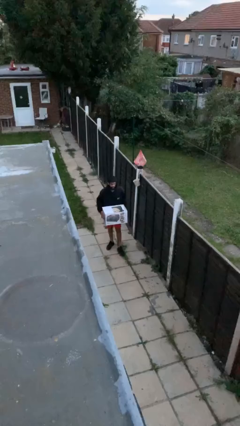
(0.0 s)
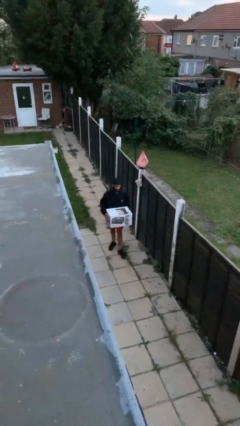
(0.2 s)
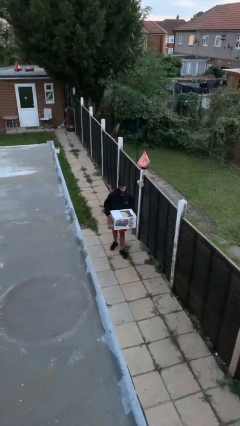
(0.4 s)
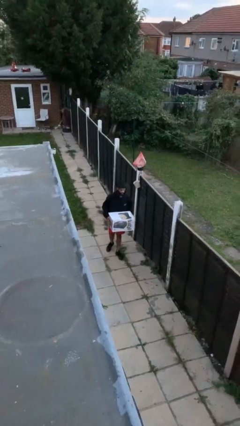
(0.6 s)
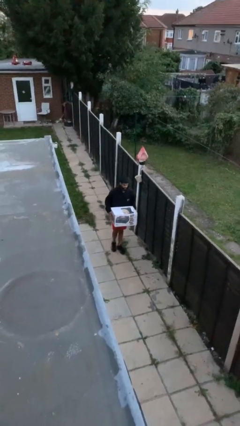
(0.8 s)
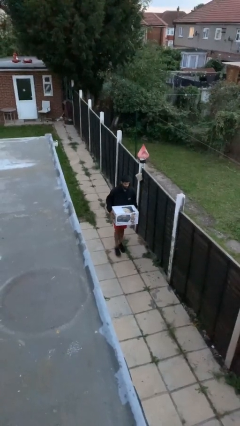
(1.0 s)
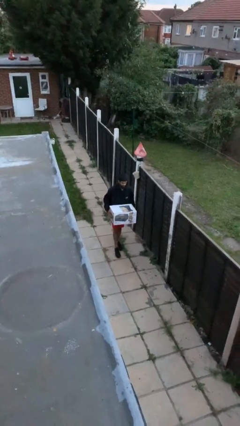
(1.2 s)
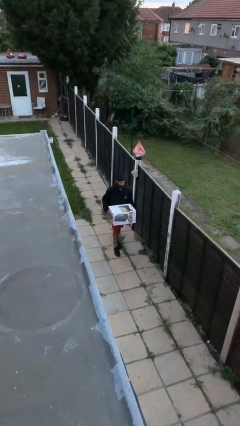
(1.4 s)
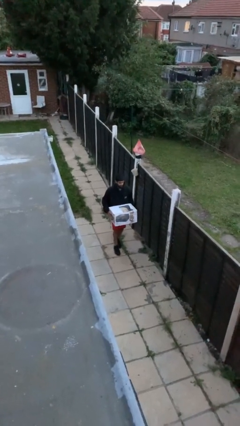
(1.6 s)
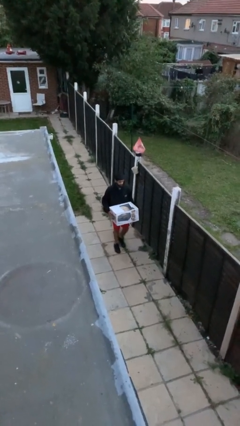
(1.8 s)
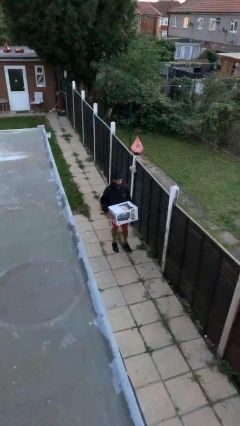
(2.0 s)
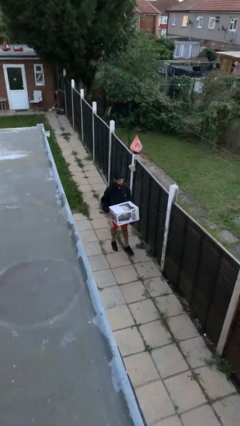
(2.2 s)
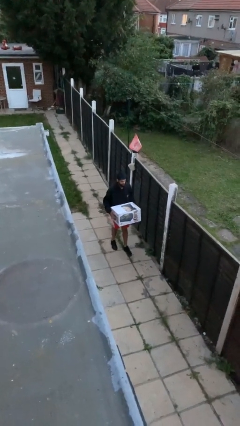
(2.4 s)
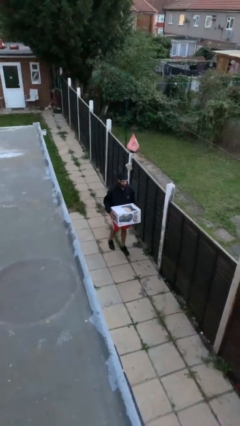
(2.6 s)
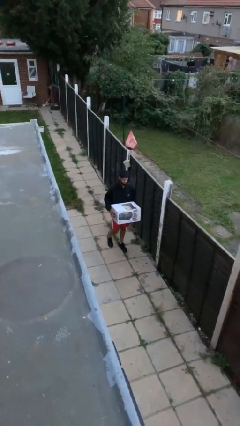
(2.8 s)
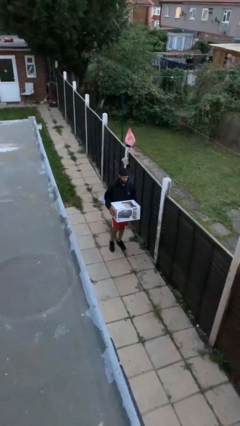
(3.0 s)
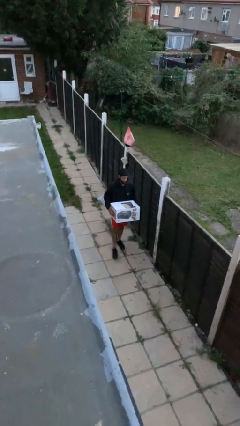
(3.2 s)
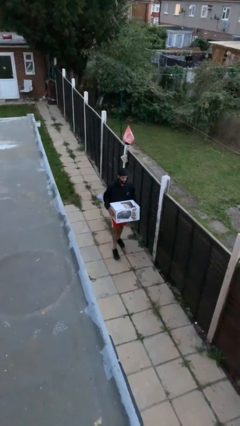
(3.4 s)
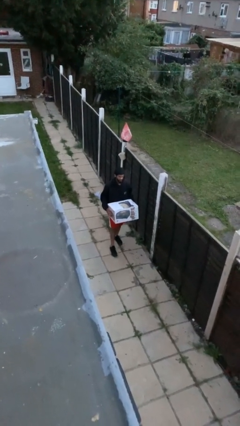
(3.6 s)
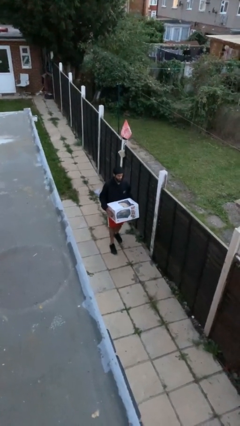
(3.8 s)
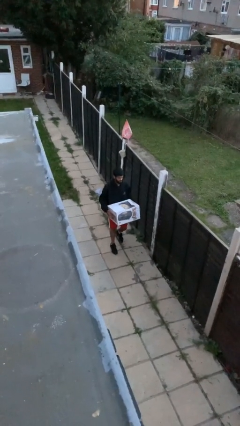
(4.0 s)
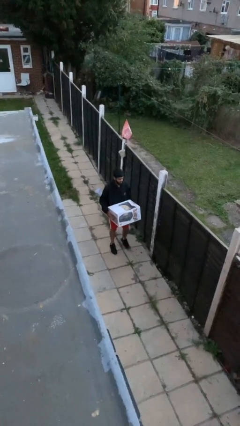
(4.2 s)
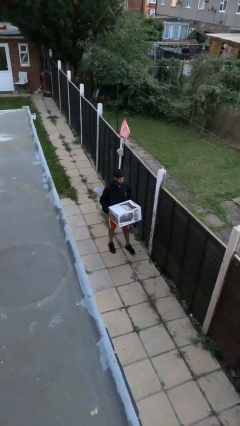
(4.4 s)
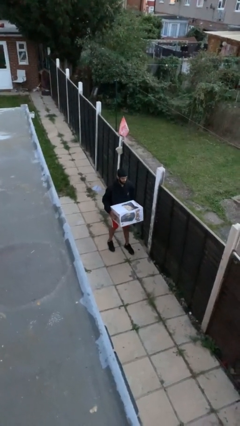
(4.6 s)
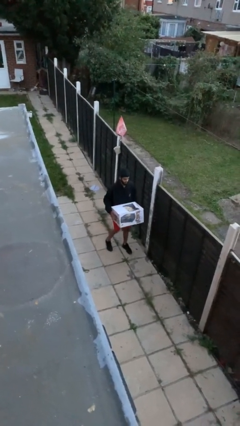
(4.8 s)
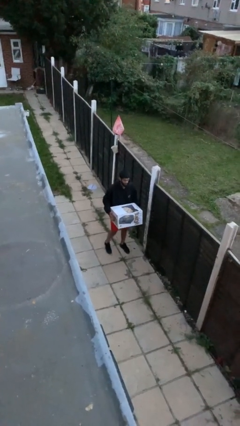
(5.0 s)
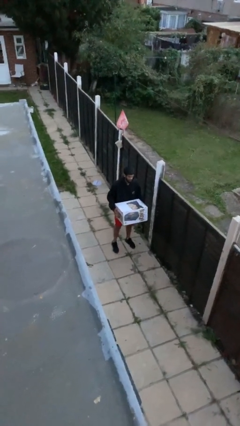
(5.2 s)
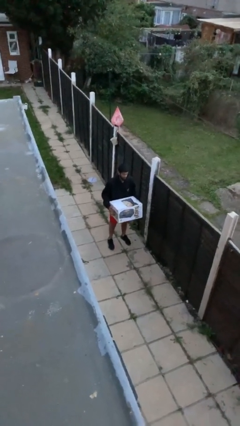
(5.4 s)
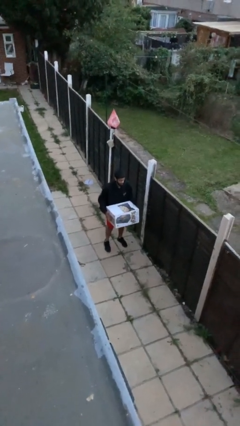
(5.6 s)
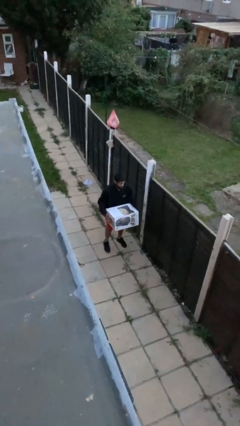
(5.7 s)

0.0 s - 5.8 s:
person carries heavy object

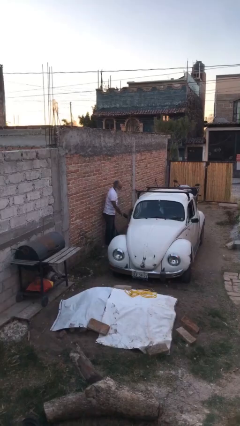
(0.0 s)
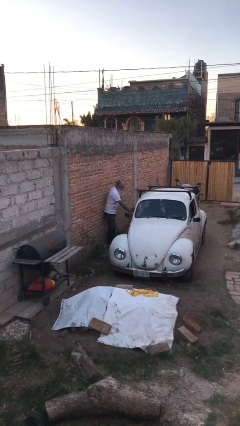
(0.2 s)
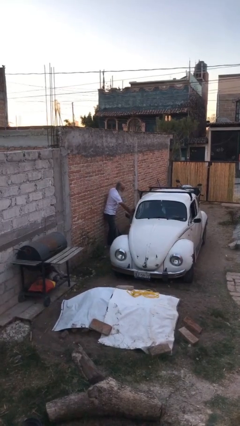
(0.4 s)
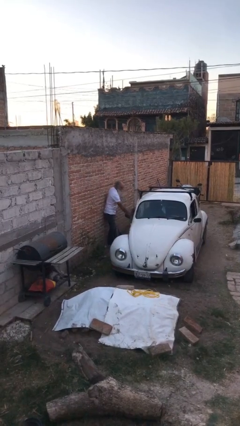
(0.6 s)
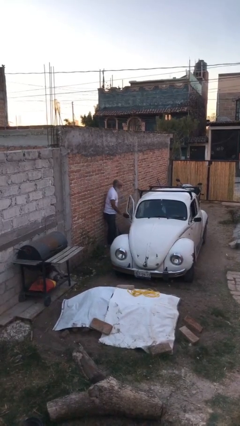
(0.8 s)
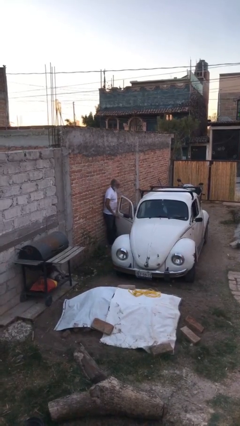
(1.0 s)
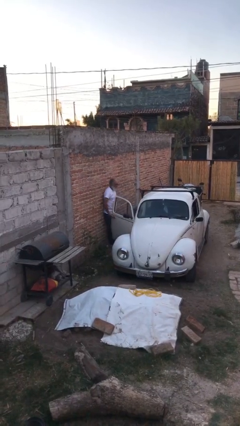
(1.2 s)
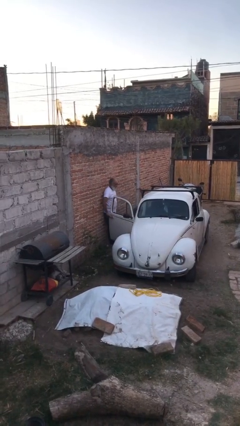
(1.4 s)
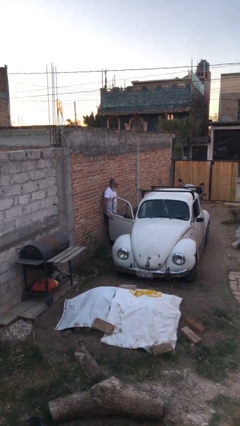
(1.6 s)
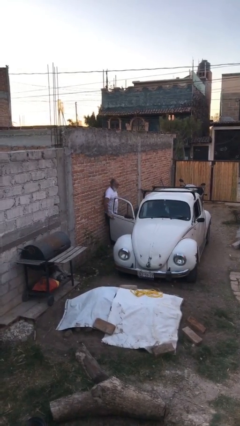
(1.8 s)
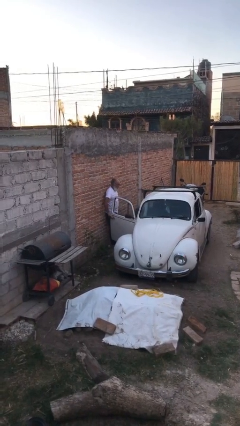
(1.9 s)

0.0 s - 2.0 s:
person opens car door

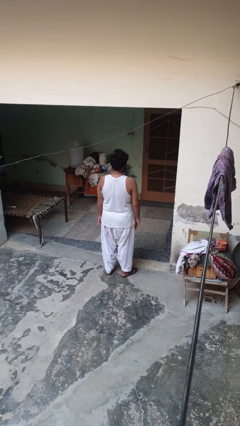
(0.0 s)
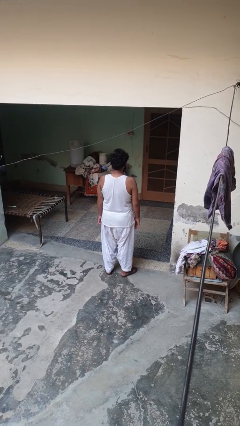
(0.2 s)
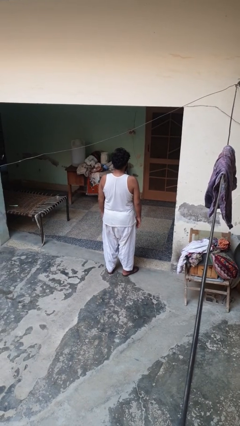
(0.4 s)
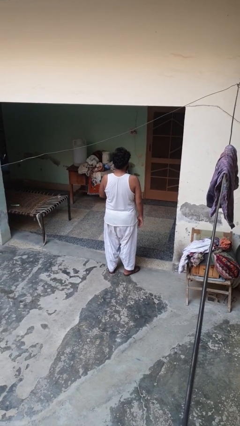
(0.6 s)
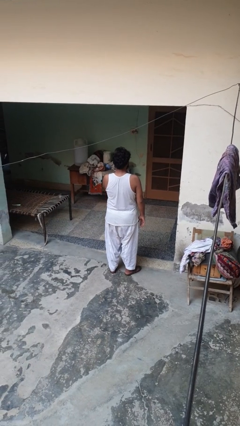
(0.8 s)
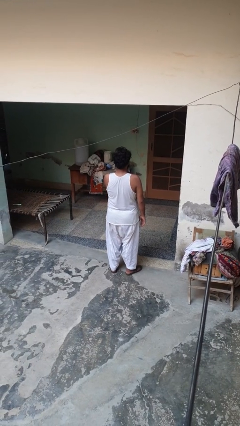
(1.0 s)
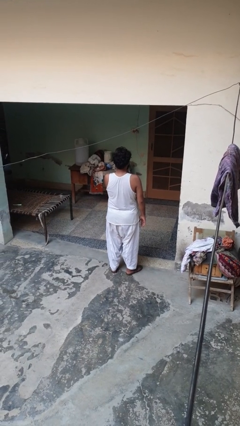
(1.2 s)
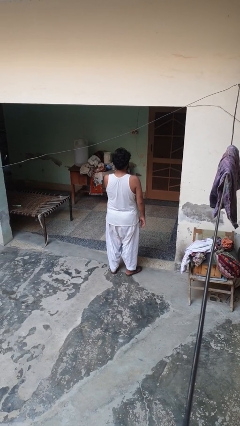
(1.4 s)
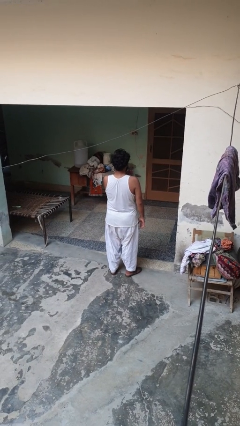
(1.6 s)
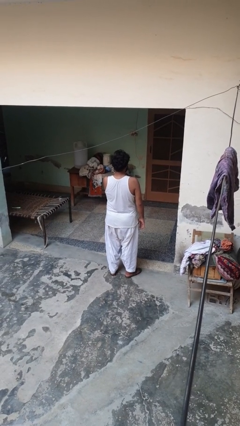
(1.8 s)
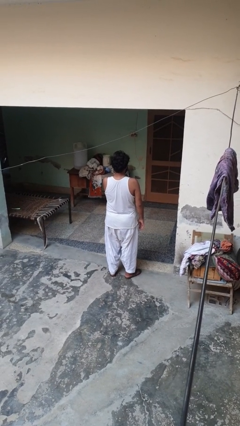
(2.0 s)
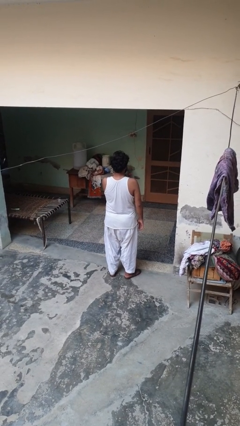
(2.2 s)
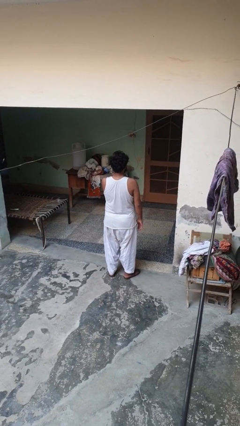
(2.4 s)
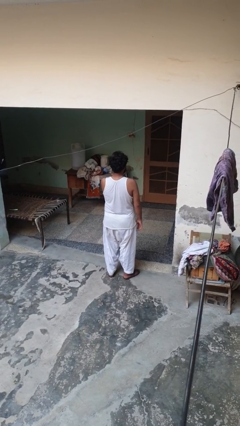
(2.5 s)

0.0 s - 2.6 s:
person drums on chest

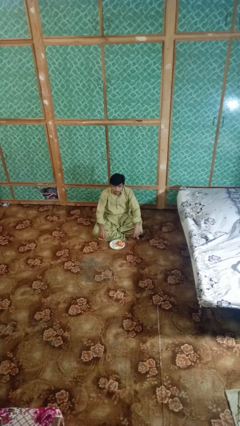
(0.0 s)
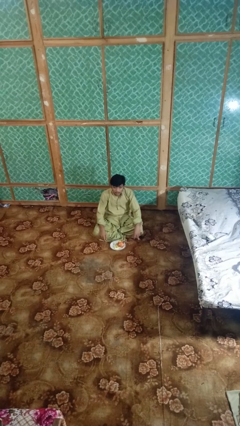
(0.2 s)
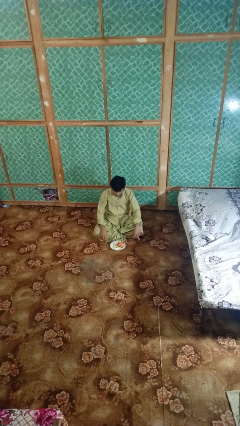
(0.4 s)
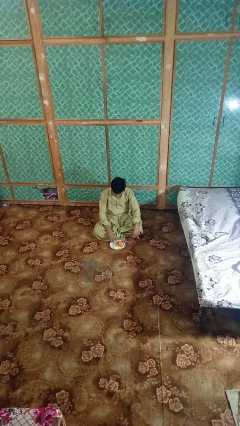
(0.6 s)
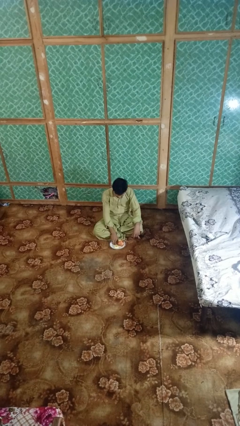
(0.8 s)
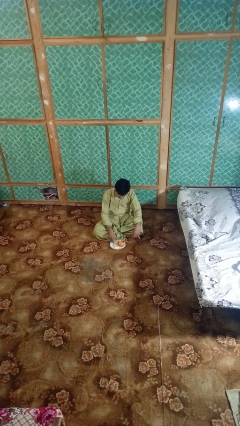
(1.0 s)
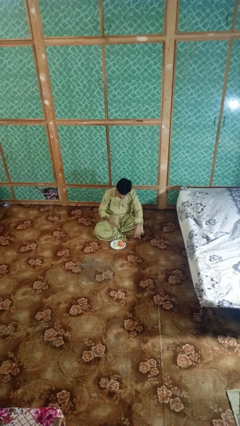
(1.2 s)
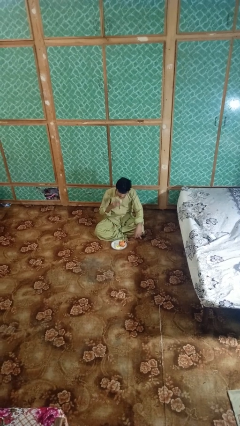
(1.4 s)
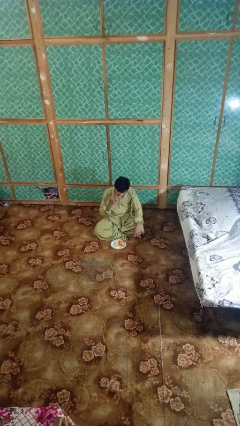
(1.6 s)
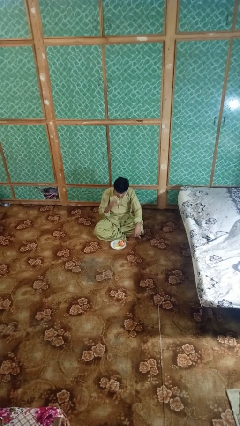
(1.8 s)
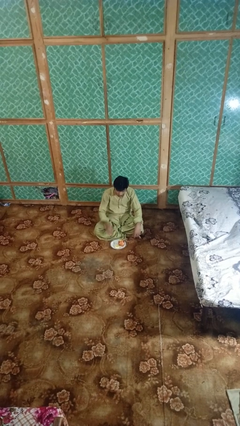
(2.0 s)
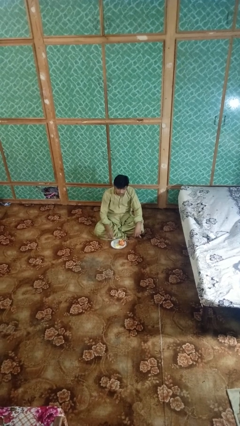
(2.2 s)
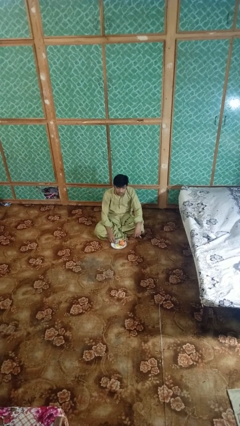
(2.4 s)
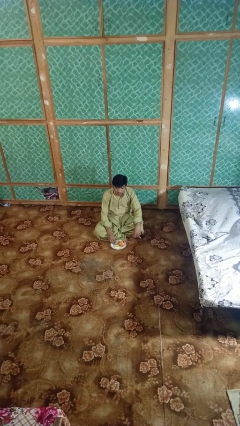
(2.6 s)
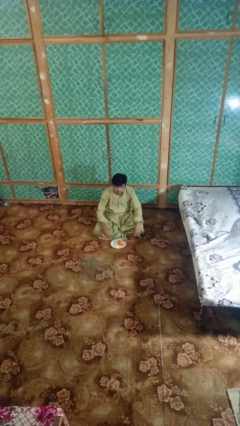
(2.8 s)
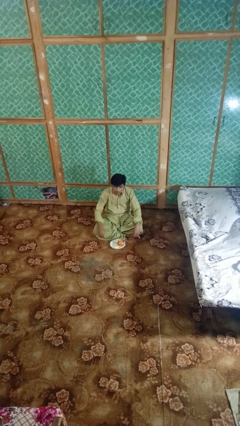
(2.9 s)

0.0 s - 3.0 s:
person eats apple

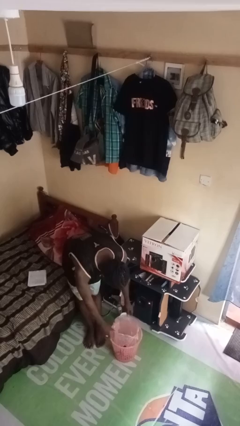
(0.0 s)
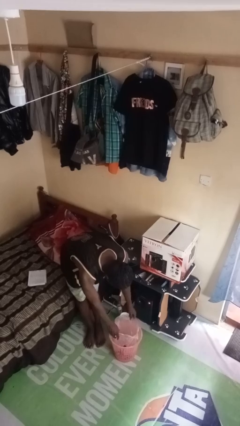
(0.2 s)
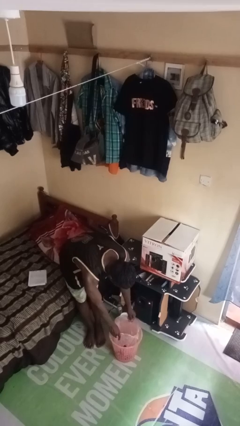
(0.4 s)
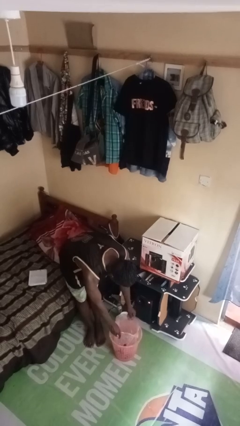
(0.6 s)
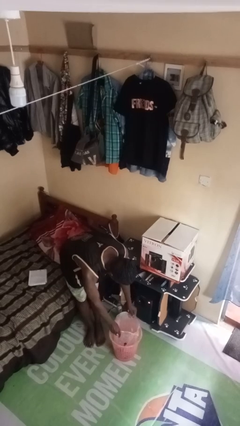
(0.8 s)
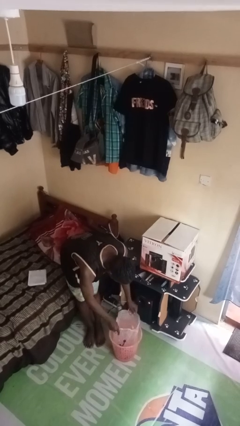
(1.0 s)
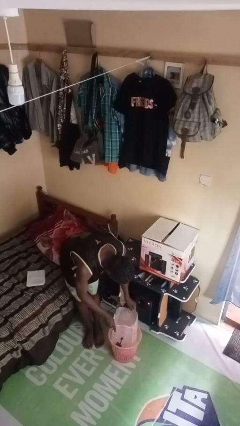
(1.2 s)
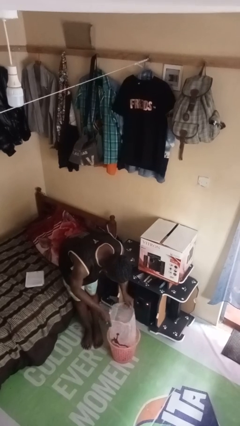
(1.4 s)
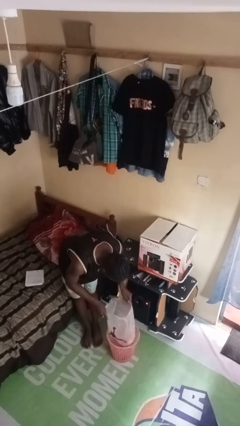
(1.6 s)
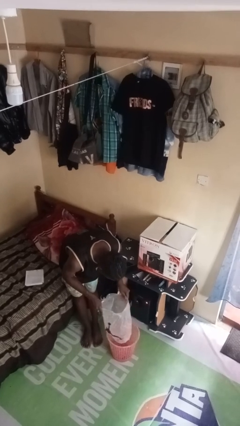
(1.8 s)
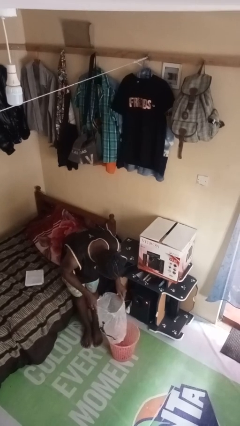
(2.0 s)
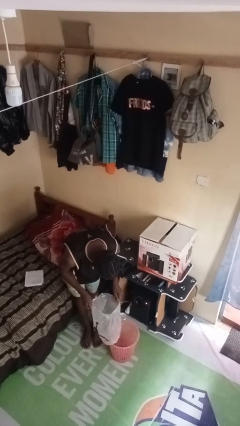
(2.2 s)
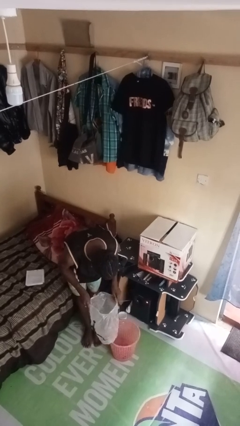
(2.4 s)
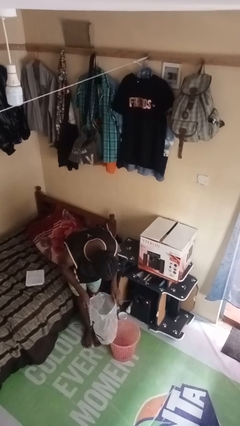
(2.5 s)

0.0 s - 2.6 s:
person removes trashbag from trashcan

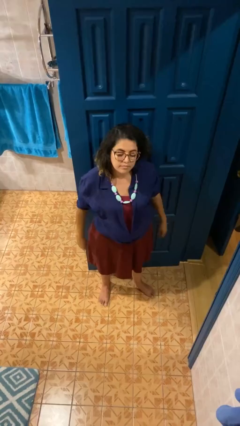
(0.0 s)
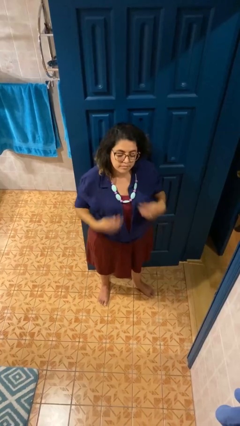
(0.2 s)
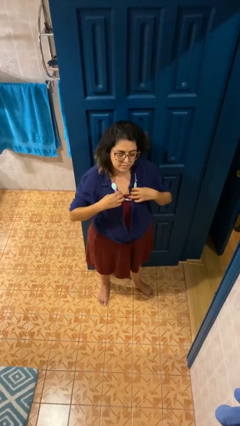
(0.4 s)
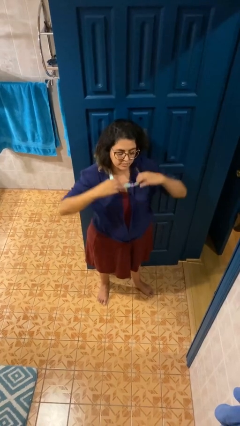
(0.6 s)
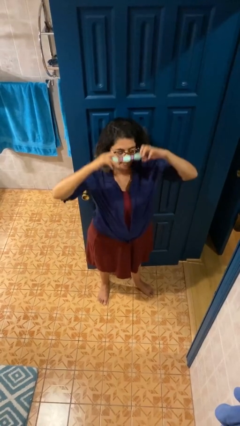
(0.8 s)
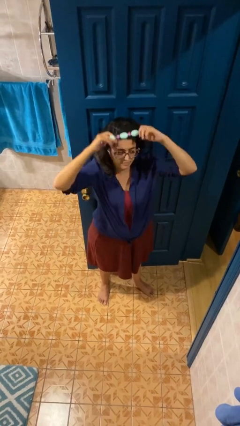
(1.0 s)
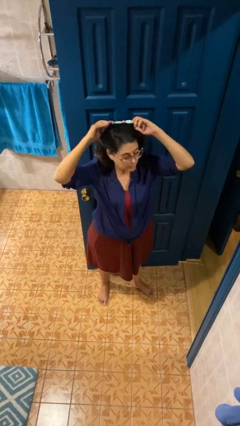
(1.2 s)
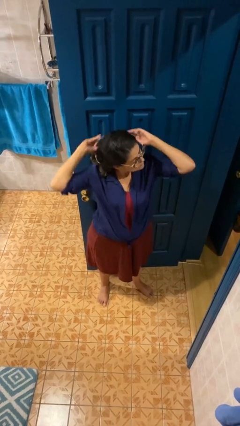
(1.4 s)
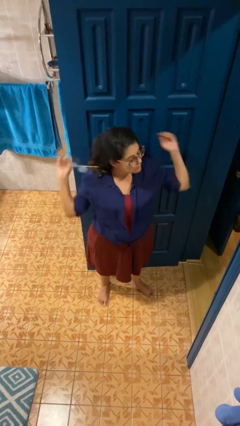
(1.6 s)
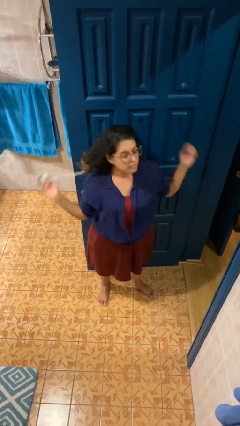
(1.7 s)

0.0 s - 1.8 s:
person takes off necklace
